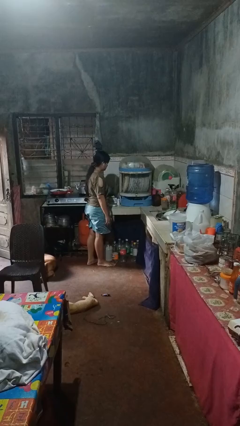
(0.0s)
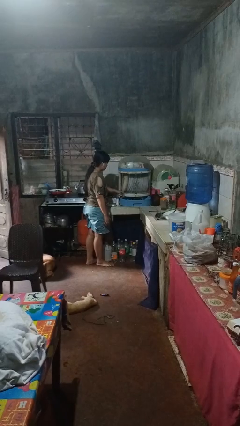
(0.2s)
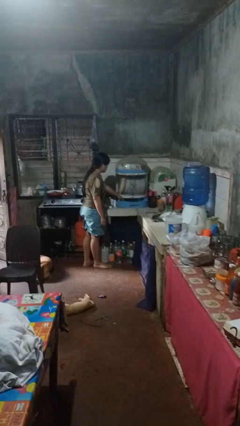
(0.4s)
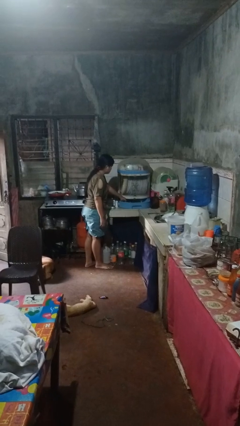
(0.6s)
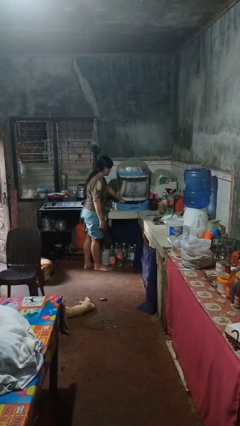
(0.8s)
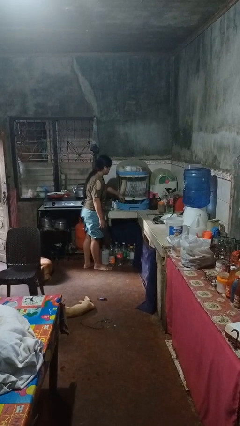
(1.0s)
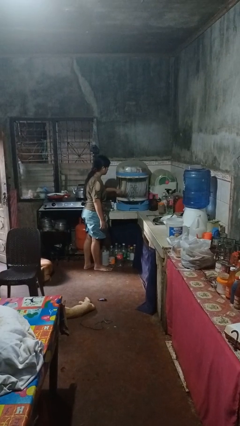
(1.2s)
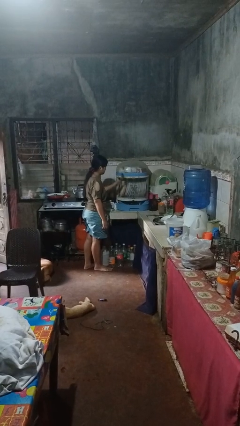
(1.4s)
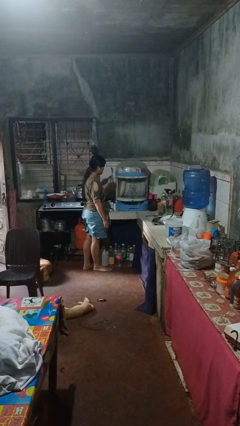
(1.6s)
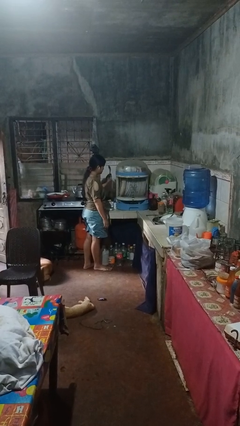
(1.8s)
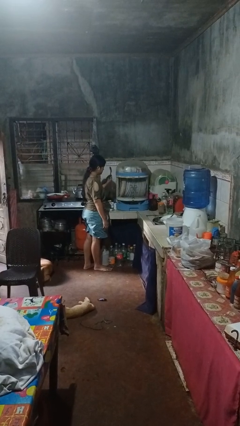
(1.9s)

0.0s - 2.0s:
person takes object from kitchen drawer

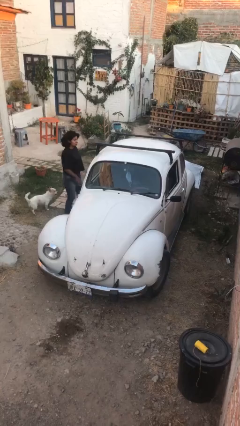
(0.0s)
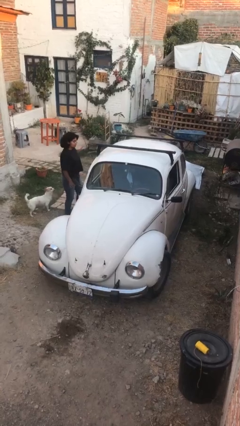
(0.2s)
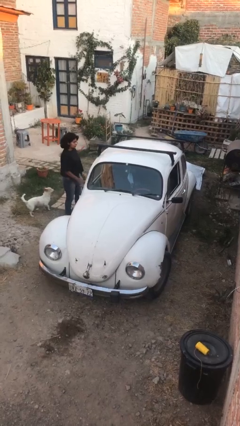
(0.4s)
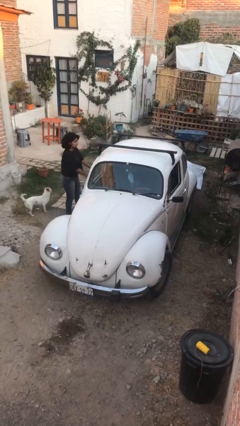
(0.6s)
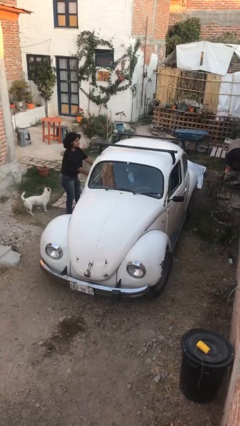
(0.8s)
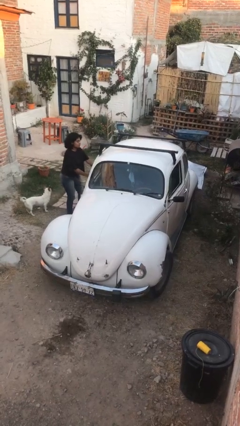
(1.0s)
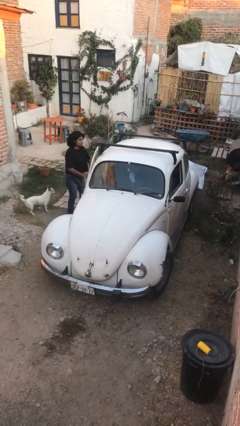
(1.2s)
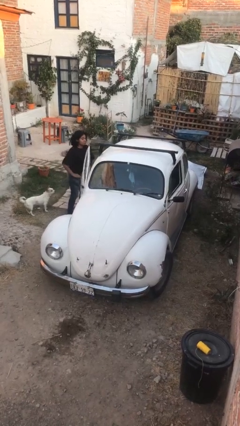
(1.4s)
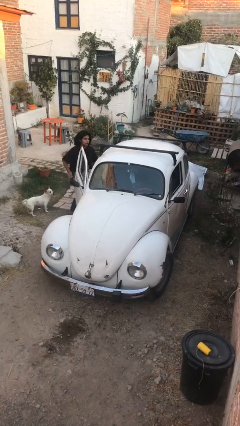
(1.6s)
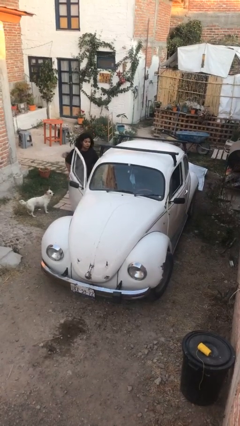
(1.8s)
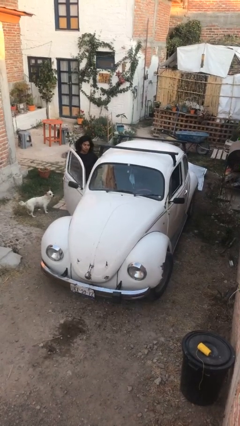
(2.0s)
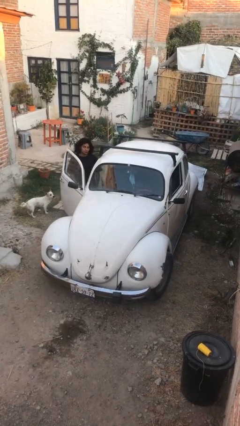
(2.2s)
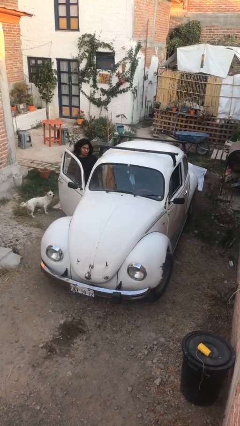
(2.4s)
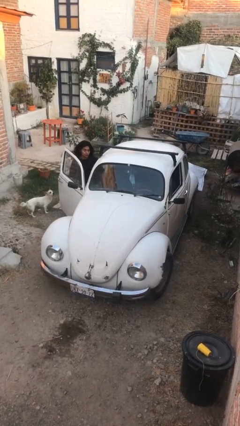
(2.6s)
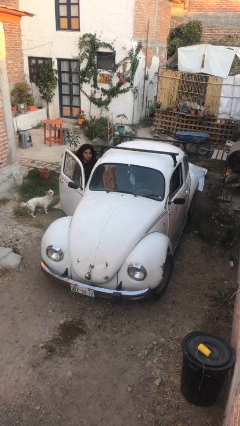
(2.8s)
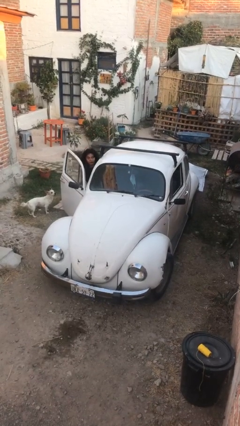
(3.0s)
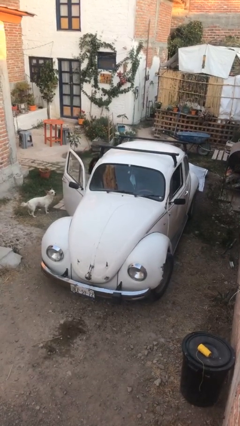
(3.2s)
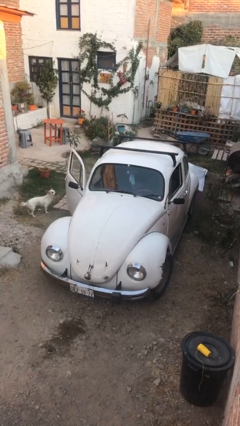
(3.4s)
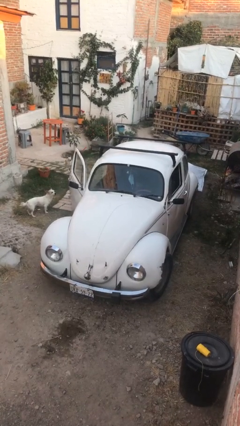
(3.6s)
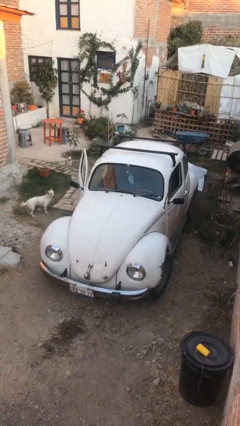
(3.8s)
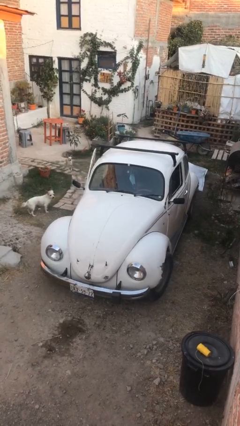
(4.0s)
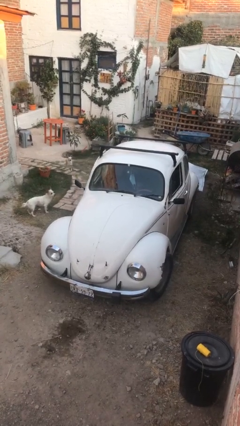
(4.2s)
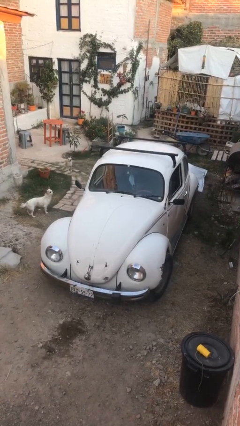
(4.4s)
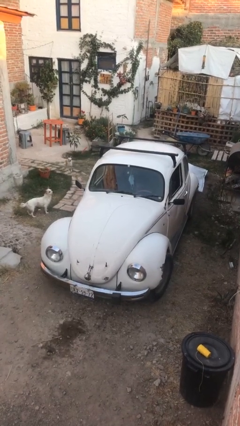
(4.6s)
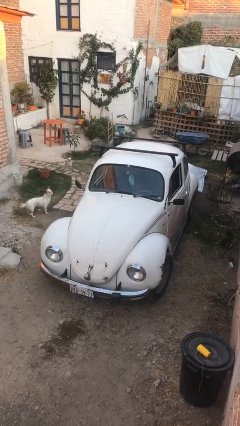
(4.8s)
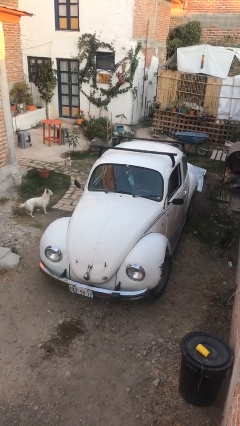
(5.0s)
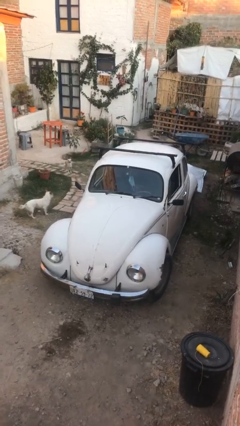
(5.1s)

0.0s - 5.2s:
car picks up person

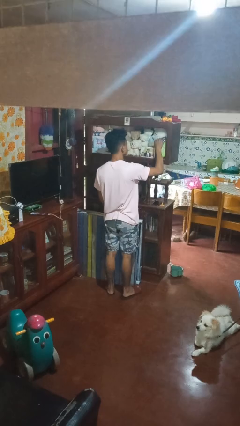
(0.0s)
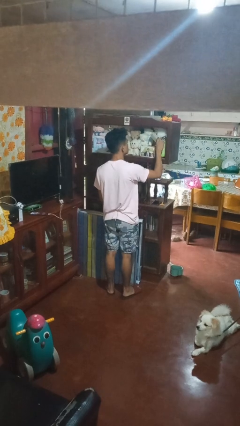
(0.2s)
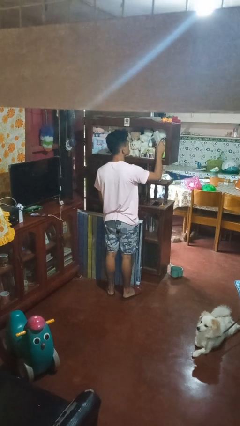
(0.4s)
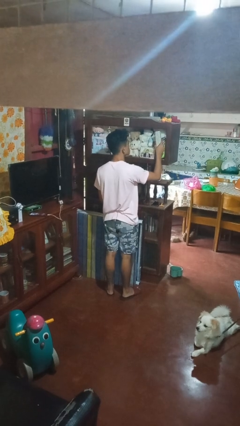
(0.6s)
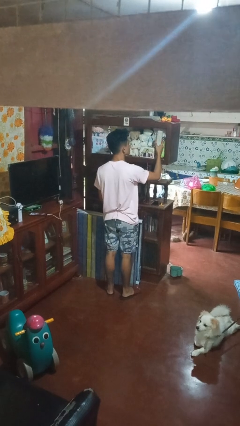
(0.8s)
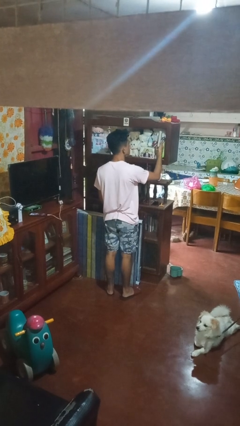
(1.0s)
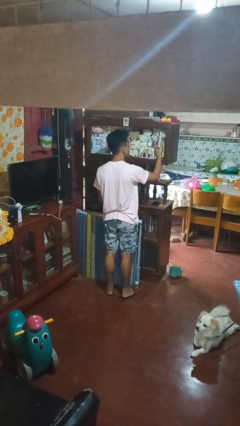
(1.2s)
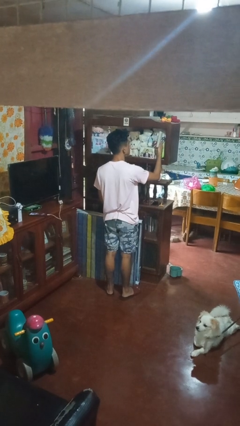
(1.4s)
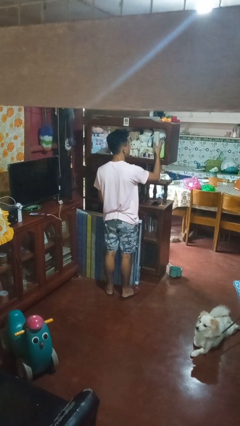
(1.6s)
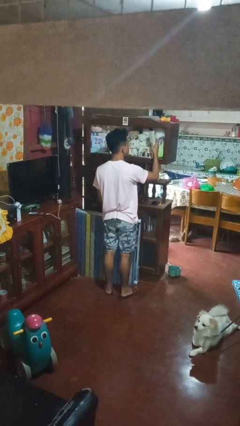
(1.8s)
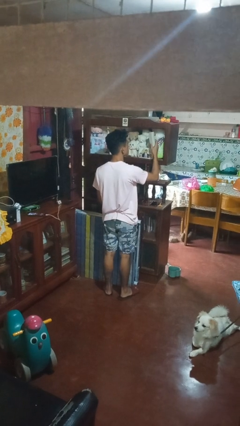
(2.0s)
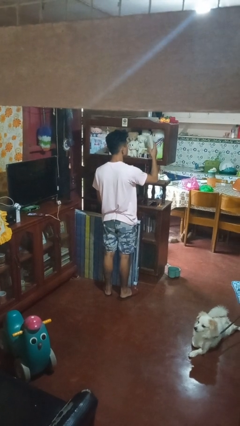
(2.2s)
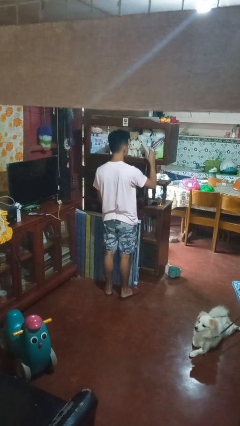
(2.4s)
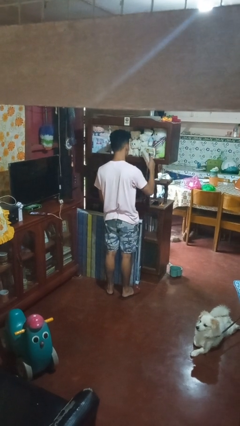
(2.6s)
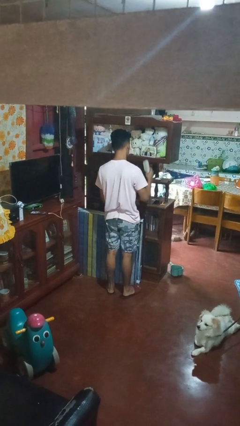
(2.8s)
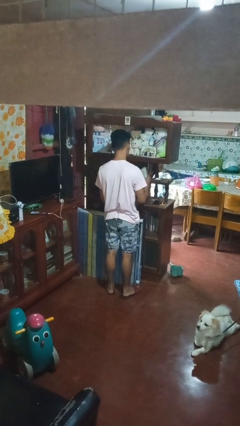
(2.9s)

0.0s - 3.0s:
person picks up object from shelf

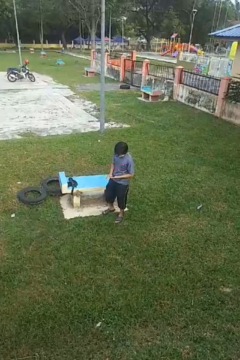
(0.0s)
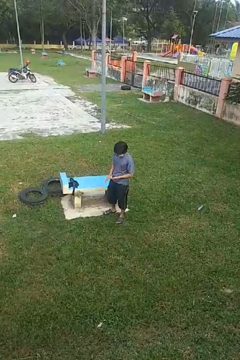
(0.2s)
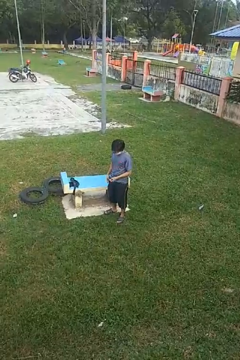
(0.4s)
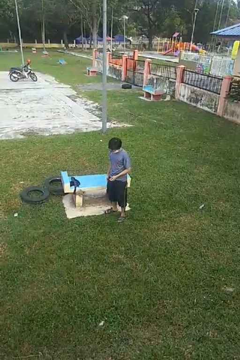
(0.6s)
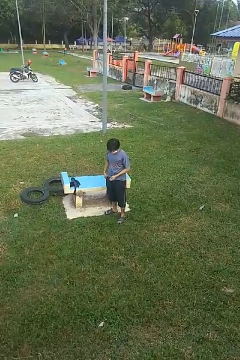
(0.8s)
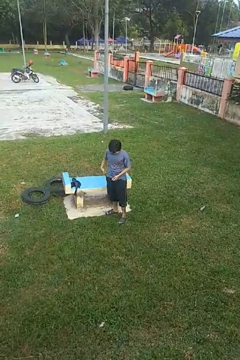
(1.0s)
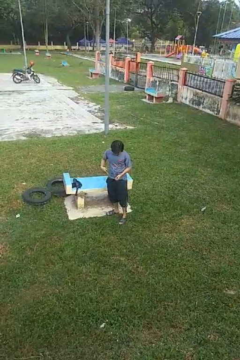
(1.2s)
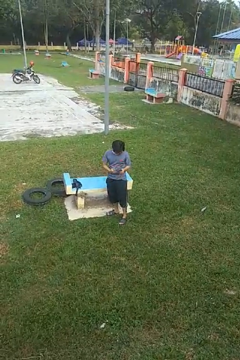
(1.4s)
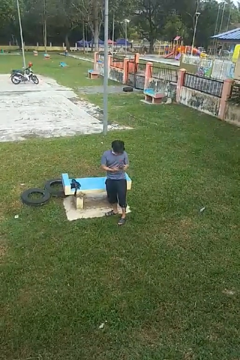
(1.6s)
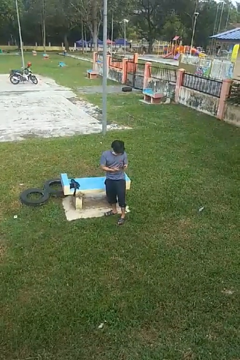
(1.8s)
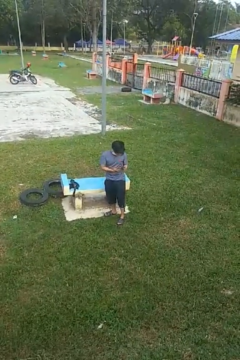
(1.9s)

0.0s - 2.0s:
person takes phone from pocket

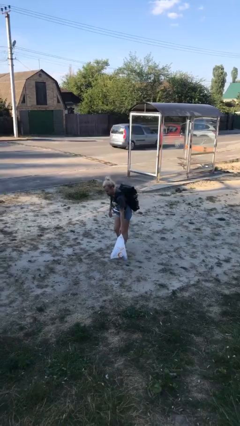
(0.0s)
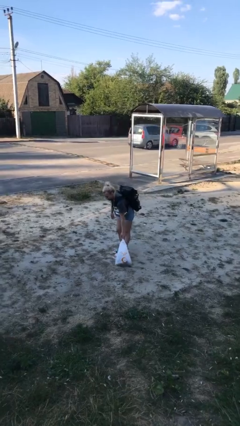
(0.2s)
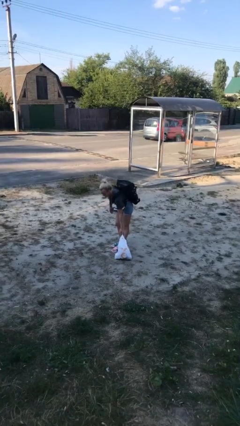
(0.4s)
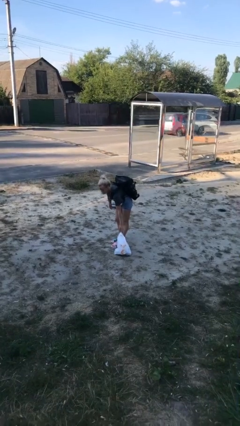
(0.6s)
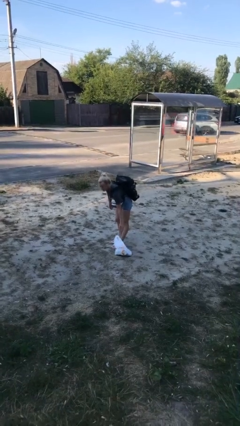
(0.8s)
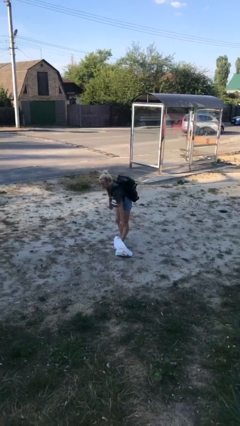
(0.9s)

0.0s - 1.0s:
person puts down object on floor

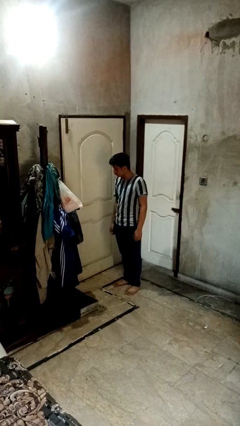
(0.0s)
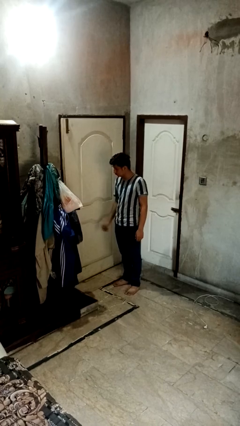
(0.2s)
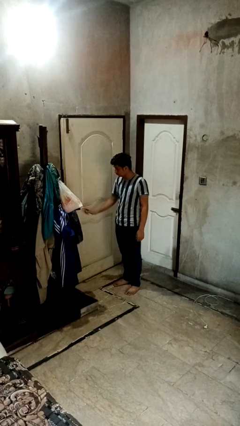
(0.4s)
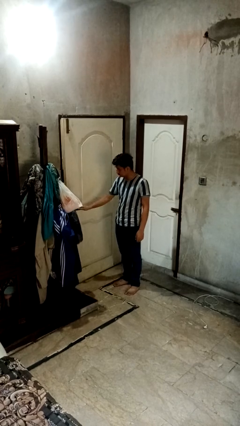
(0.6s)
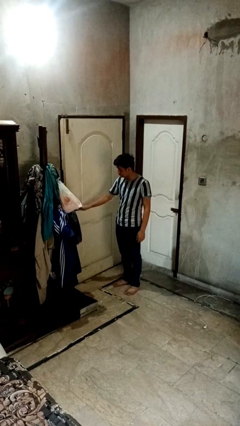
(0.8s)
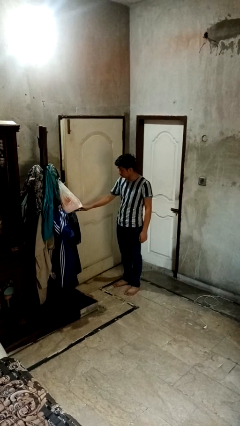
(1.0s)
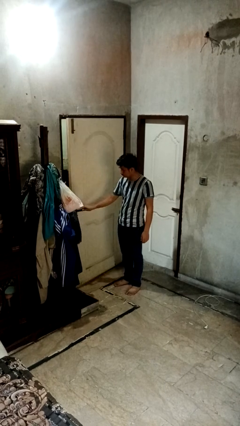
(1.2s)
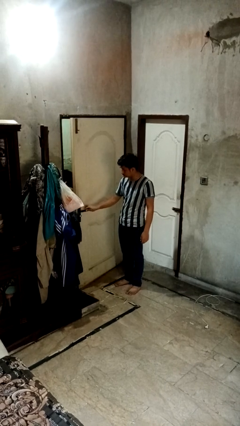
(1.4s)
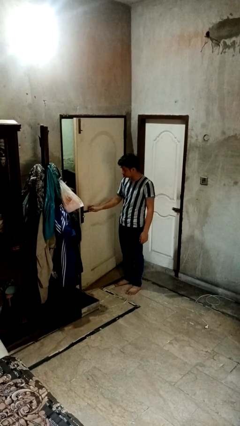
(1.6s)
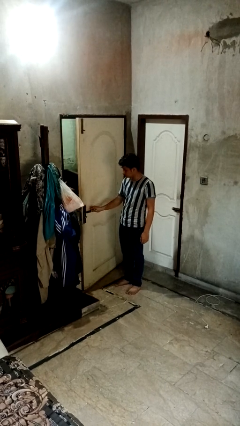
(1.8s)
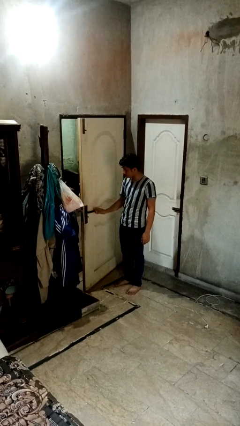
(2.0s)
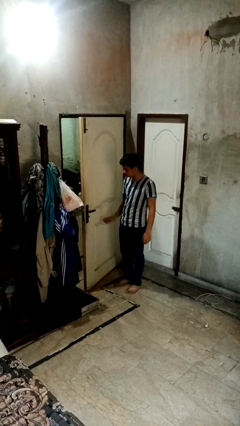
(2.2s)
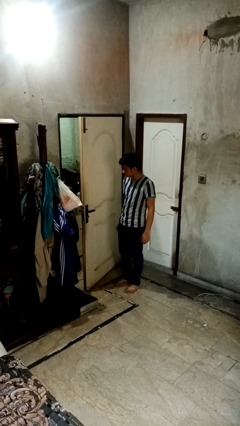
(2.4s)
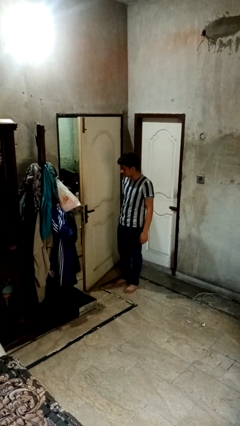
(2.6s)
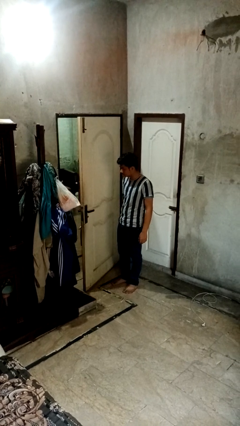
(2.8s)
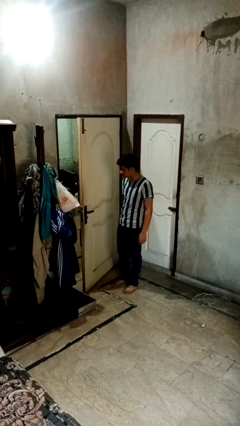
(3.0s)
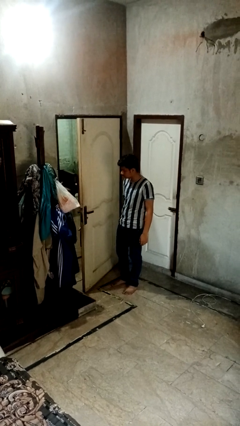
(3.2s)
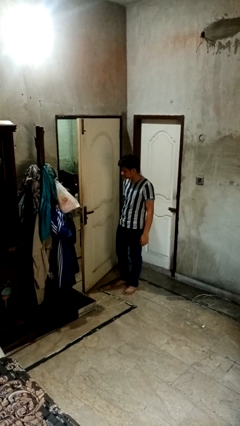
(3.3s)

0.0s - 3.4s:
person opens facility door

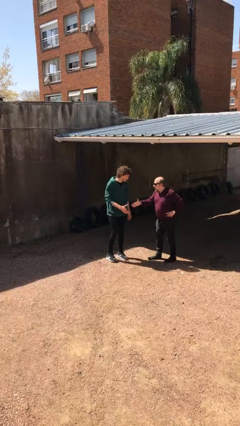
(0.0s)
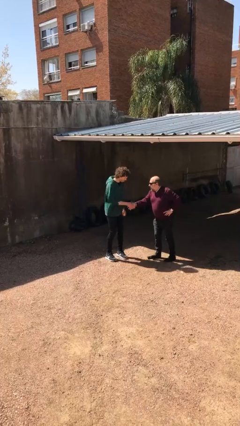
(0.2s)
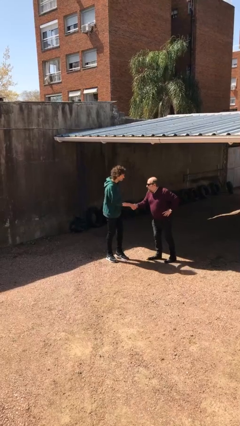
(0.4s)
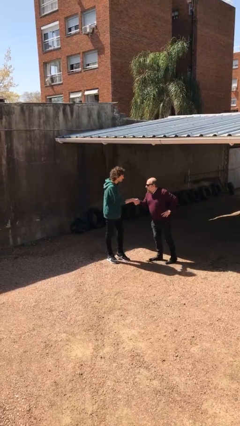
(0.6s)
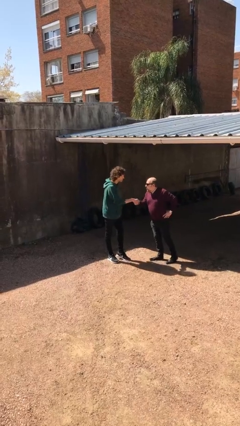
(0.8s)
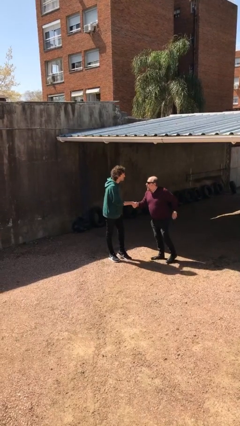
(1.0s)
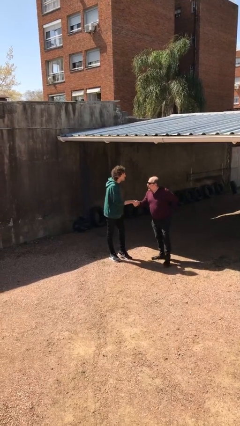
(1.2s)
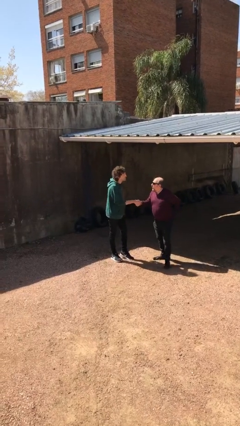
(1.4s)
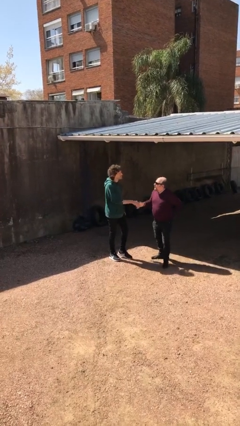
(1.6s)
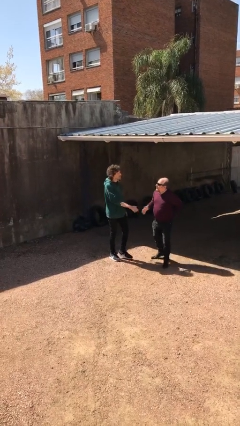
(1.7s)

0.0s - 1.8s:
person shakes hand
